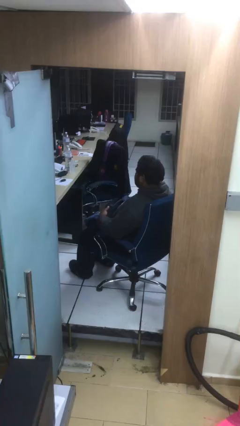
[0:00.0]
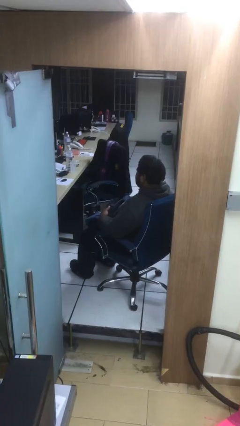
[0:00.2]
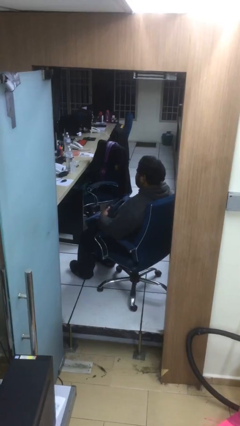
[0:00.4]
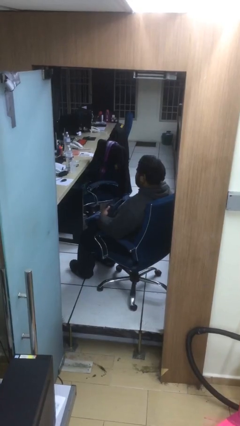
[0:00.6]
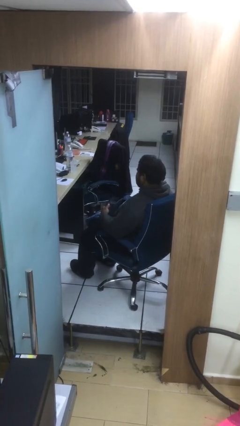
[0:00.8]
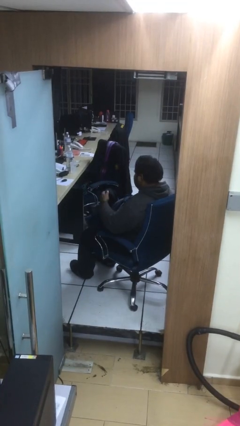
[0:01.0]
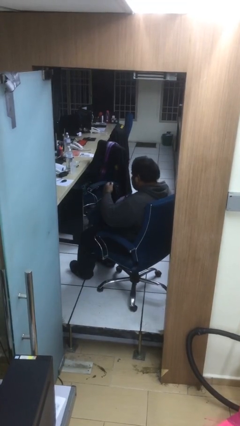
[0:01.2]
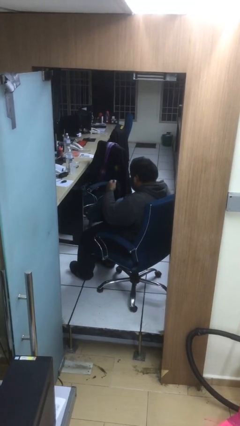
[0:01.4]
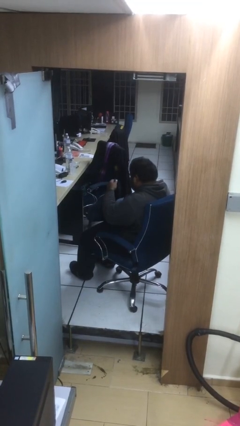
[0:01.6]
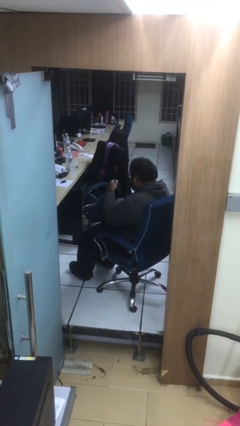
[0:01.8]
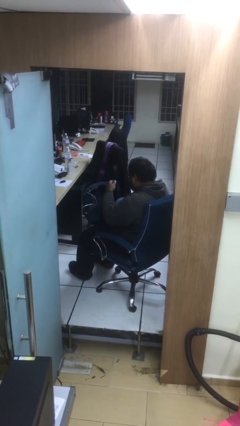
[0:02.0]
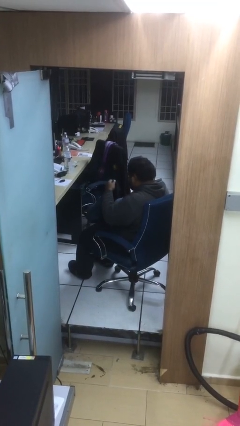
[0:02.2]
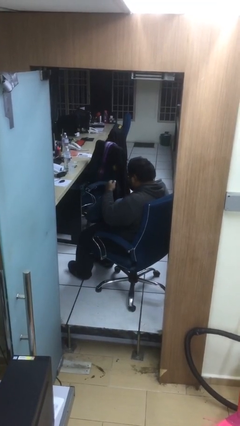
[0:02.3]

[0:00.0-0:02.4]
person searches in backpack

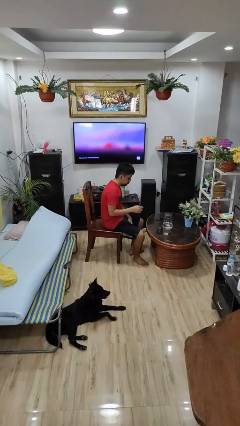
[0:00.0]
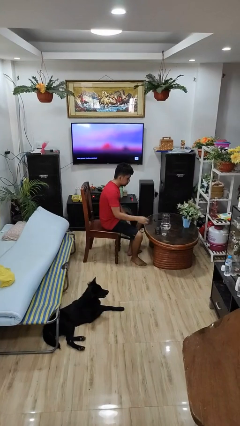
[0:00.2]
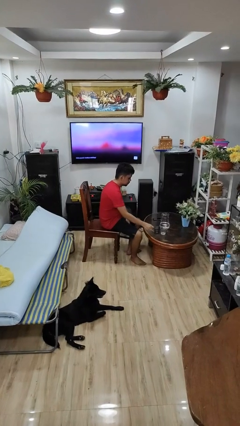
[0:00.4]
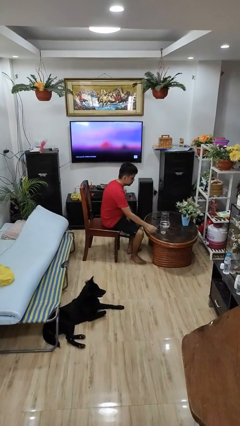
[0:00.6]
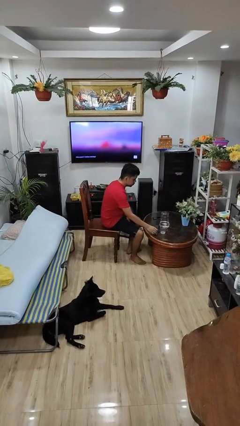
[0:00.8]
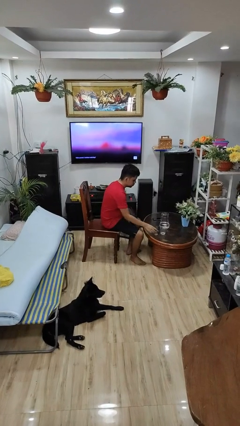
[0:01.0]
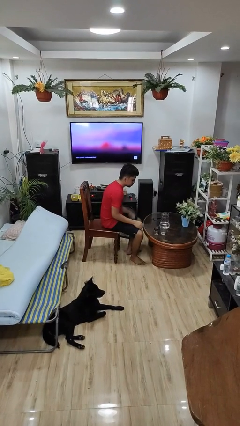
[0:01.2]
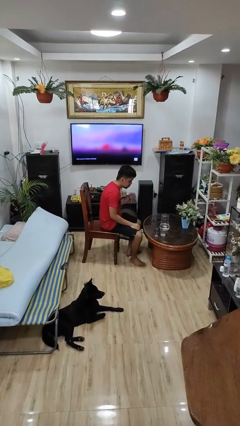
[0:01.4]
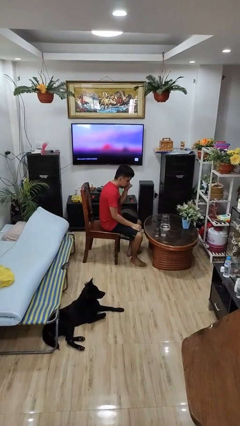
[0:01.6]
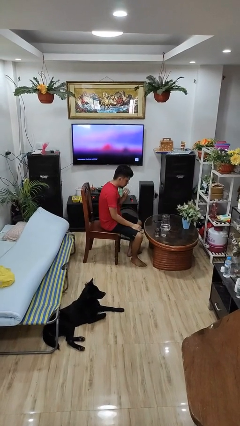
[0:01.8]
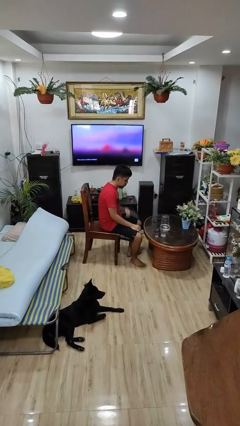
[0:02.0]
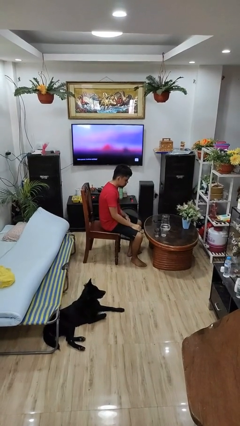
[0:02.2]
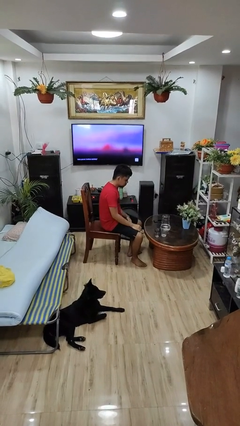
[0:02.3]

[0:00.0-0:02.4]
person puts down object on table

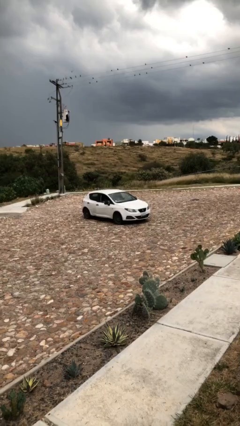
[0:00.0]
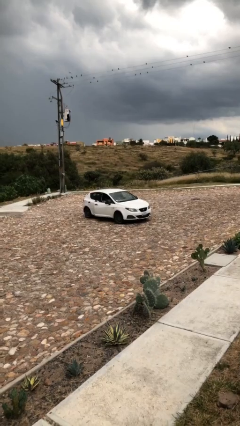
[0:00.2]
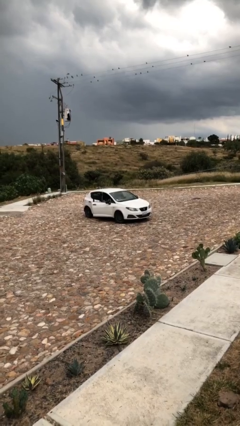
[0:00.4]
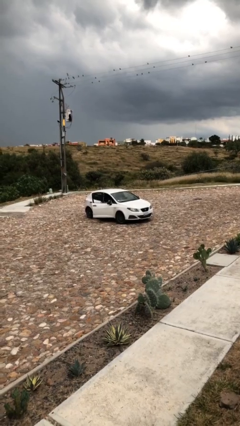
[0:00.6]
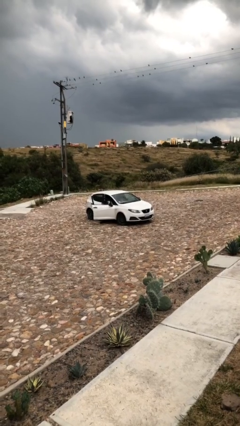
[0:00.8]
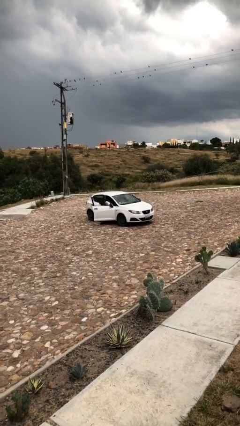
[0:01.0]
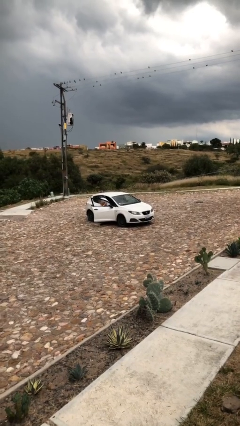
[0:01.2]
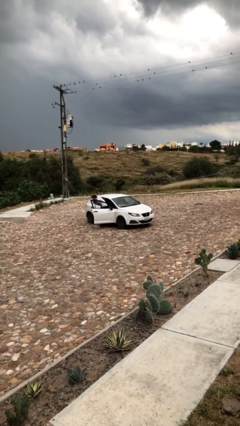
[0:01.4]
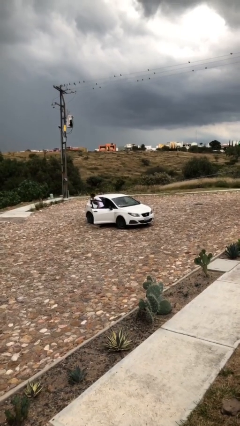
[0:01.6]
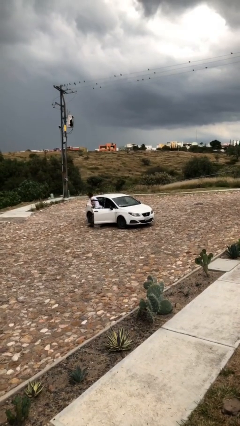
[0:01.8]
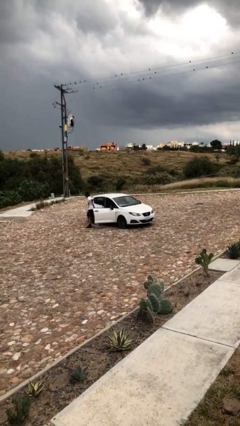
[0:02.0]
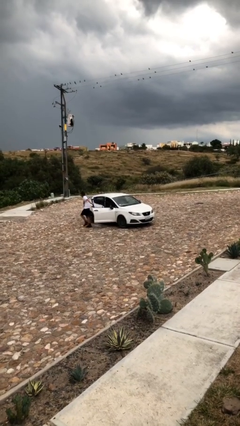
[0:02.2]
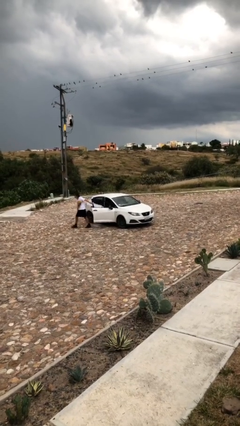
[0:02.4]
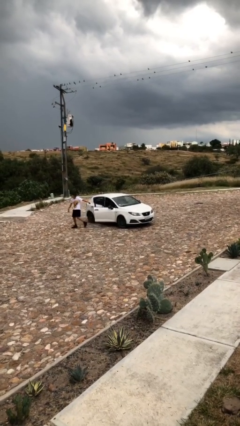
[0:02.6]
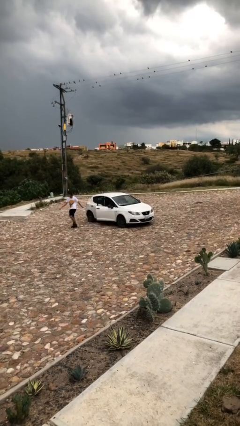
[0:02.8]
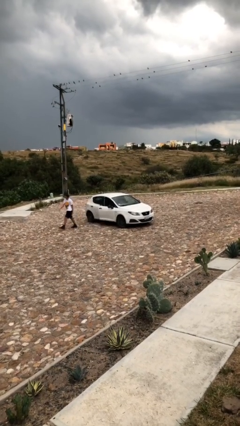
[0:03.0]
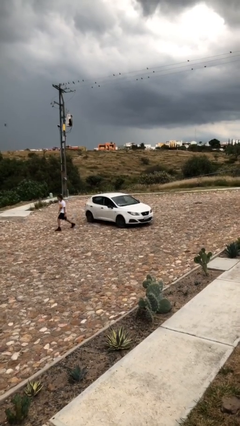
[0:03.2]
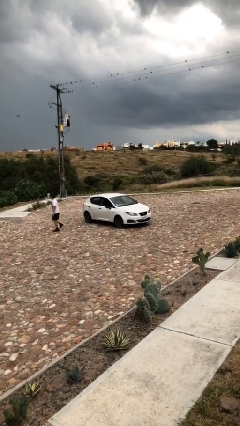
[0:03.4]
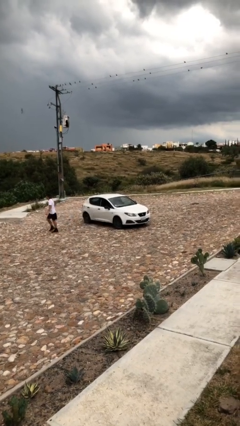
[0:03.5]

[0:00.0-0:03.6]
car drops off person

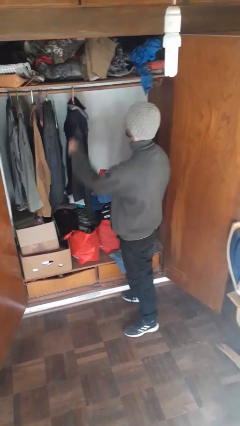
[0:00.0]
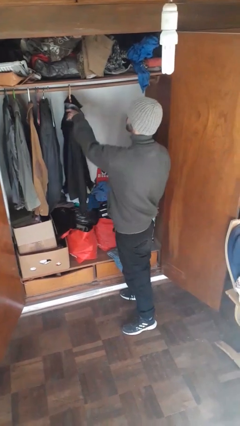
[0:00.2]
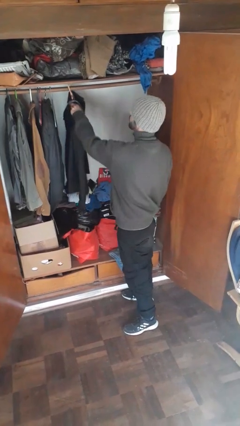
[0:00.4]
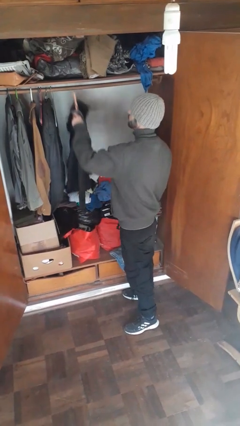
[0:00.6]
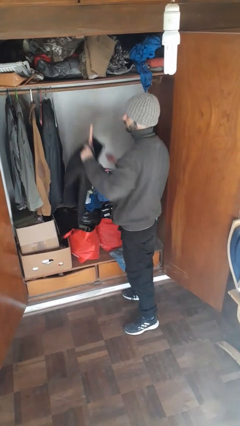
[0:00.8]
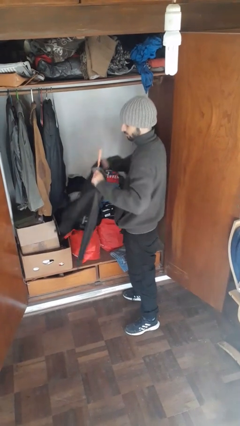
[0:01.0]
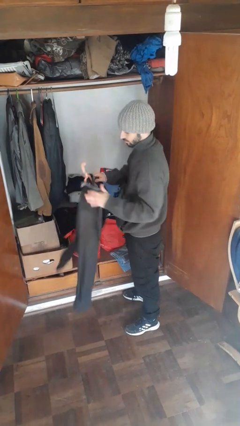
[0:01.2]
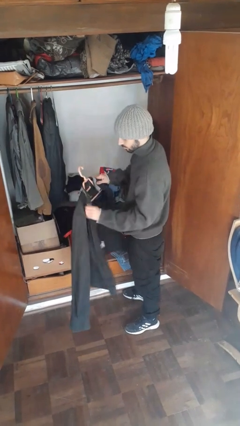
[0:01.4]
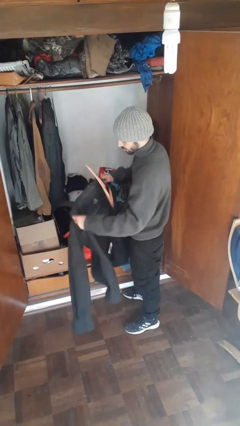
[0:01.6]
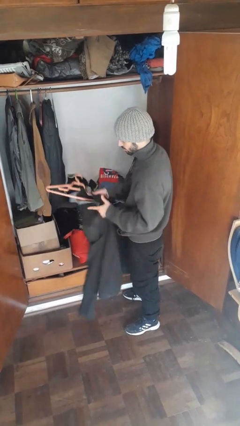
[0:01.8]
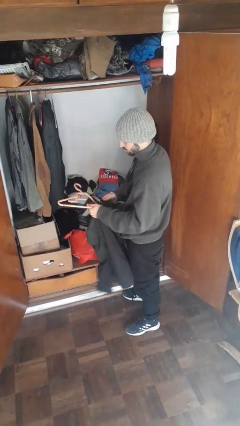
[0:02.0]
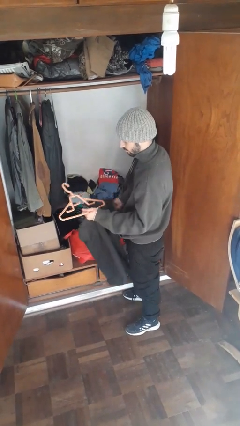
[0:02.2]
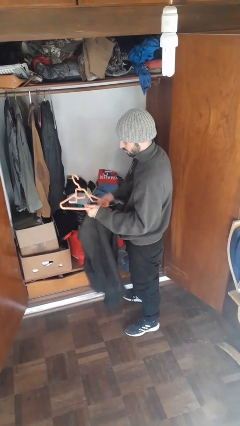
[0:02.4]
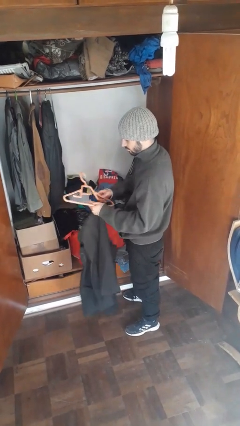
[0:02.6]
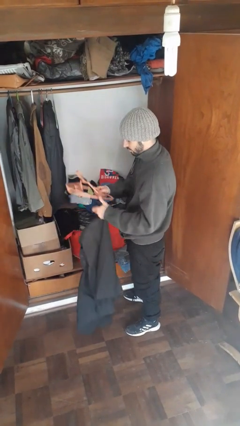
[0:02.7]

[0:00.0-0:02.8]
person takes clothes from closet

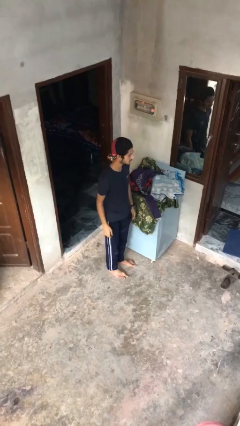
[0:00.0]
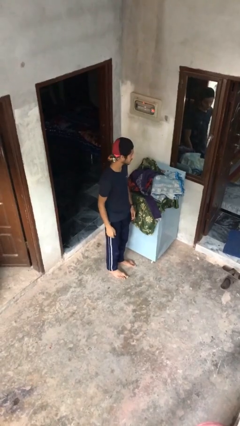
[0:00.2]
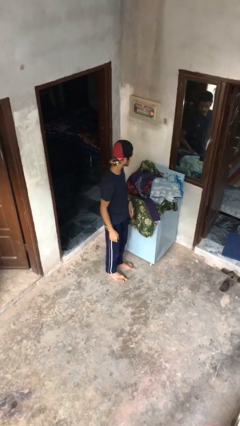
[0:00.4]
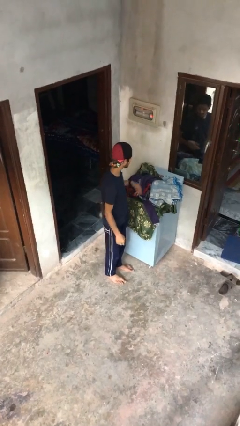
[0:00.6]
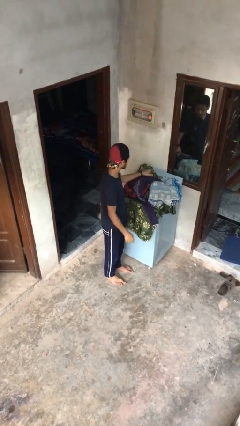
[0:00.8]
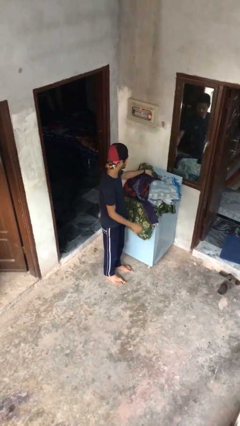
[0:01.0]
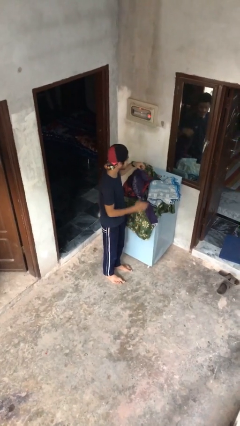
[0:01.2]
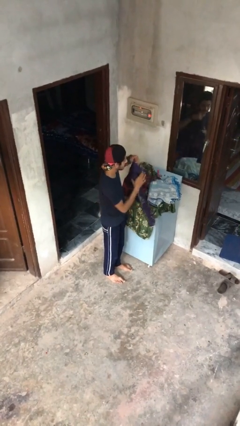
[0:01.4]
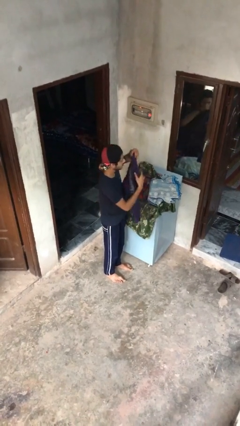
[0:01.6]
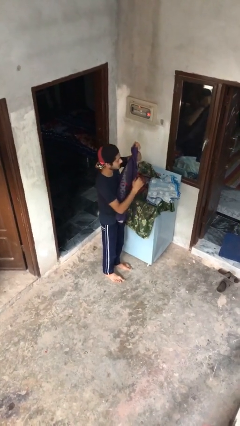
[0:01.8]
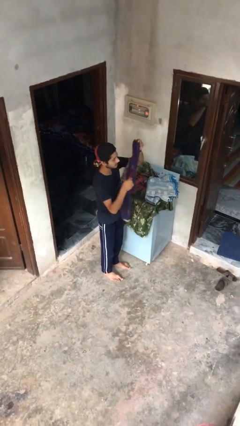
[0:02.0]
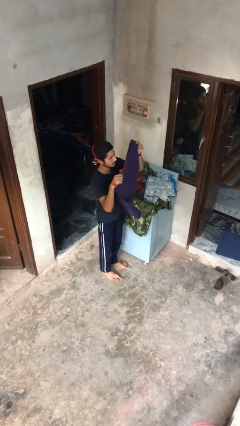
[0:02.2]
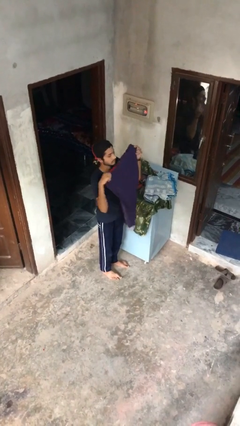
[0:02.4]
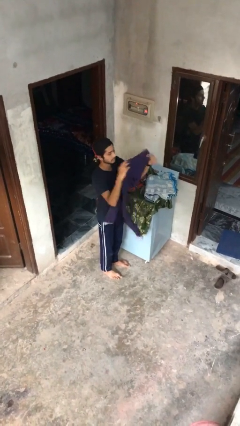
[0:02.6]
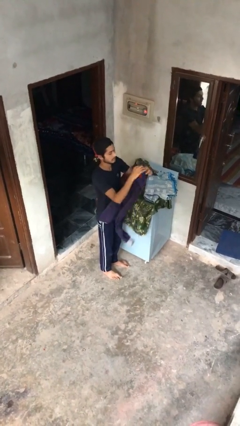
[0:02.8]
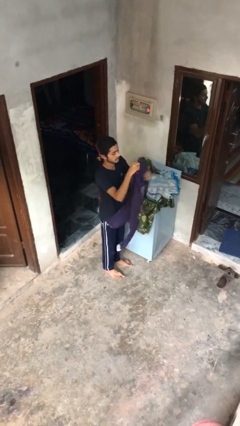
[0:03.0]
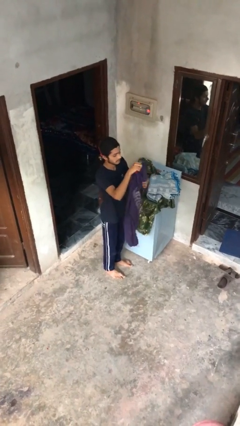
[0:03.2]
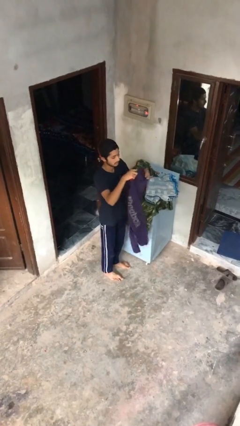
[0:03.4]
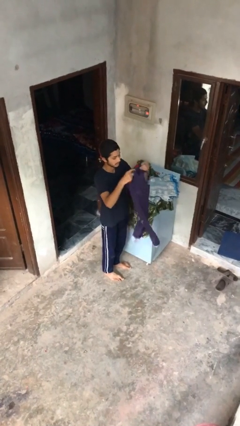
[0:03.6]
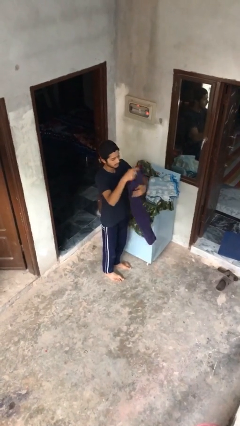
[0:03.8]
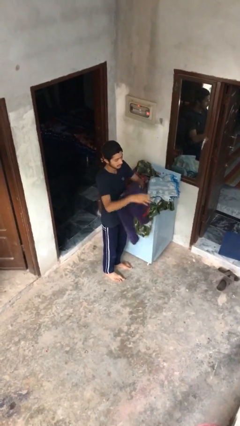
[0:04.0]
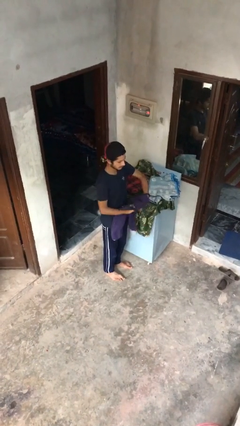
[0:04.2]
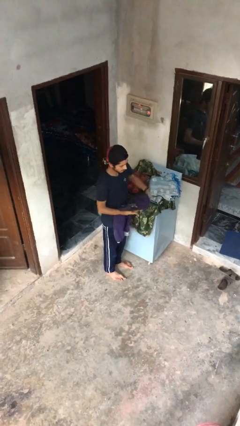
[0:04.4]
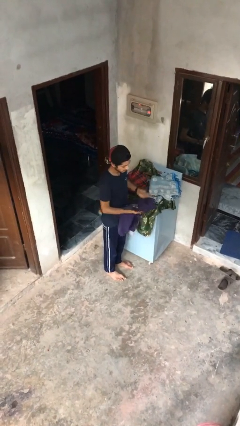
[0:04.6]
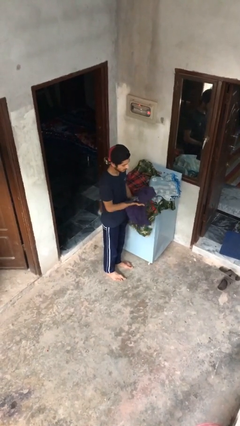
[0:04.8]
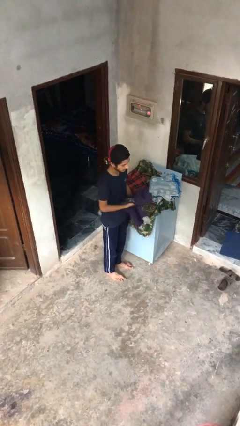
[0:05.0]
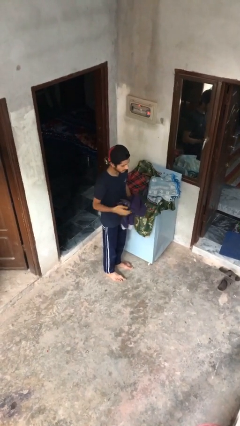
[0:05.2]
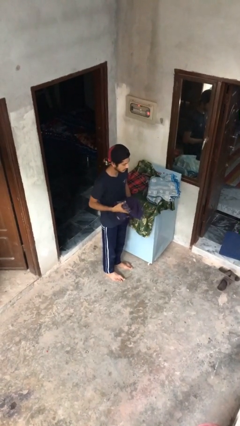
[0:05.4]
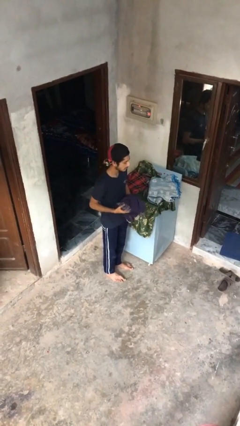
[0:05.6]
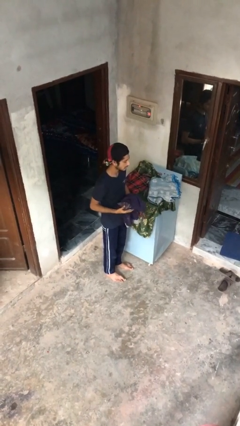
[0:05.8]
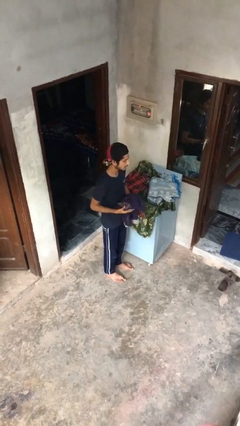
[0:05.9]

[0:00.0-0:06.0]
person folds pants

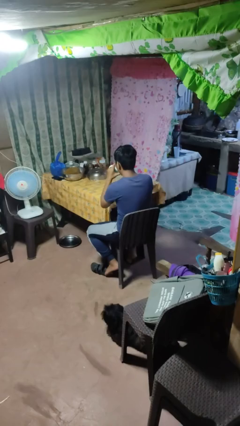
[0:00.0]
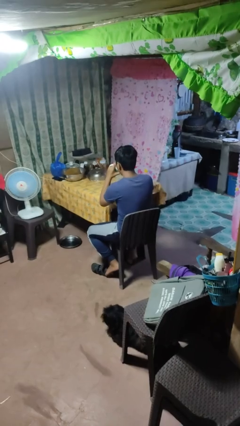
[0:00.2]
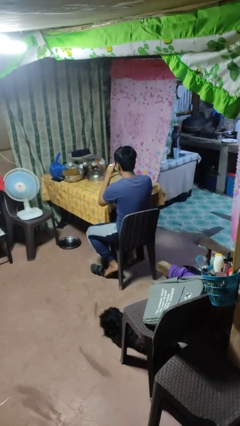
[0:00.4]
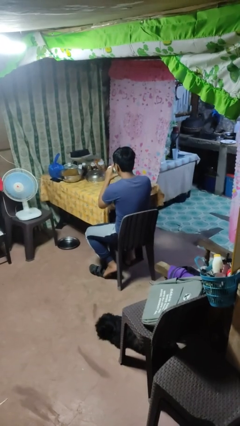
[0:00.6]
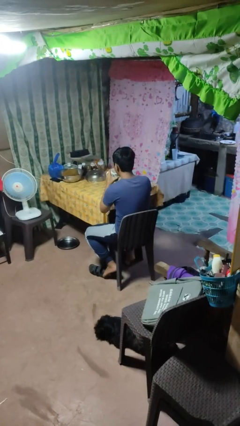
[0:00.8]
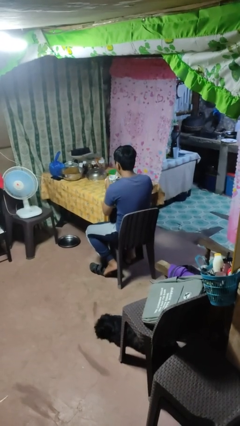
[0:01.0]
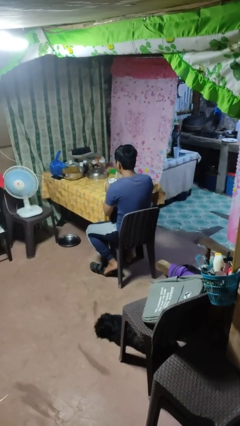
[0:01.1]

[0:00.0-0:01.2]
person drinks from mug
